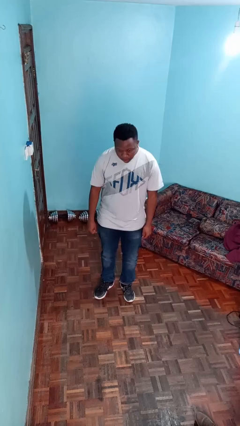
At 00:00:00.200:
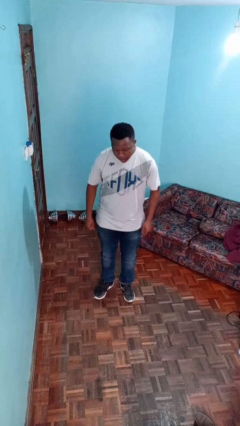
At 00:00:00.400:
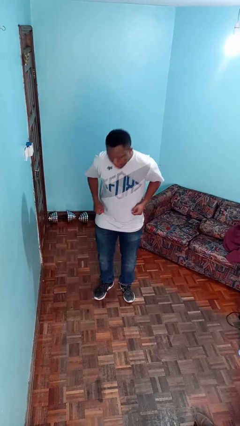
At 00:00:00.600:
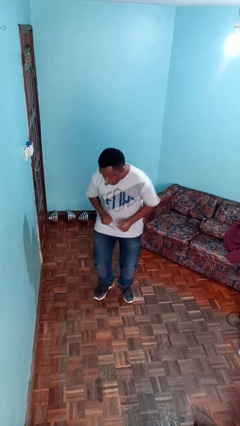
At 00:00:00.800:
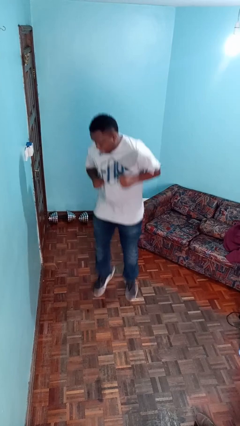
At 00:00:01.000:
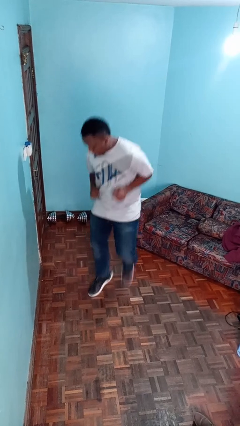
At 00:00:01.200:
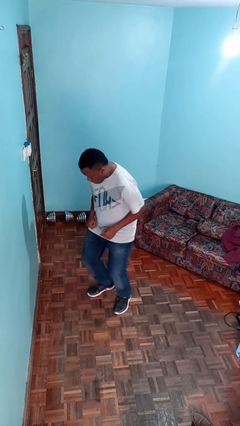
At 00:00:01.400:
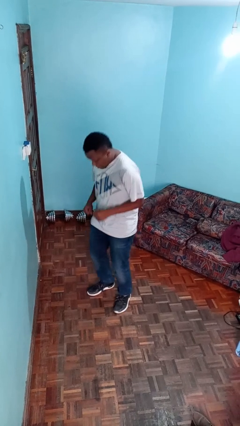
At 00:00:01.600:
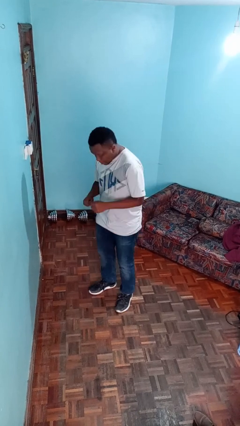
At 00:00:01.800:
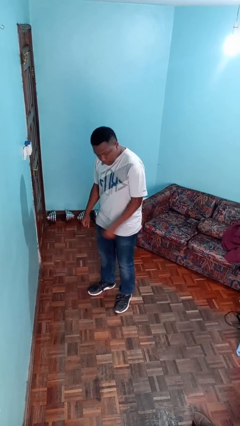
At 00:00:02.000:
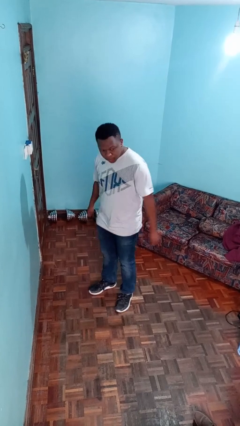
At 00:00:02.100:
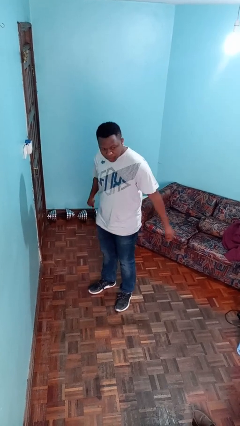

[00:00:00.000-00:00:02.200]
person jumps

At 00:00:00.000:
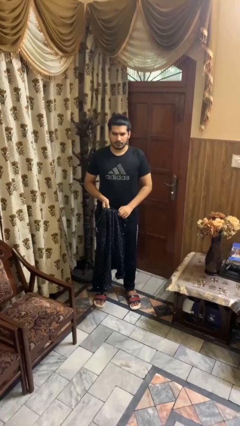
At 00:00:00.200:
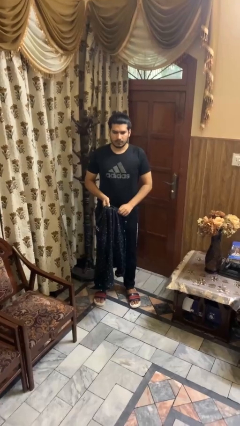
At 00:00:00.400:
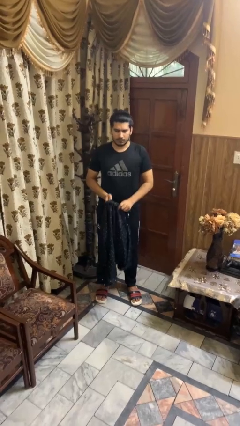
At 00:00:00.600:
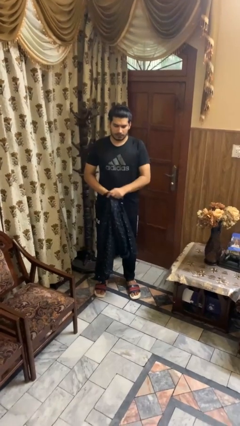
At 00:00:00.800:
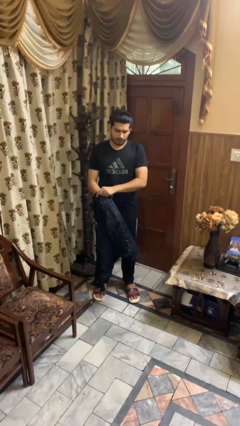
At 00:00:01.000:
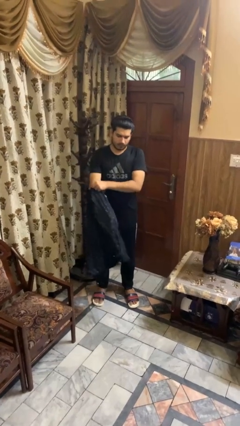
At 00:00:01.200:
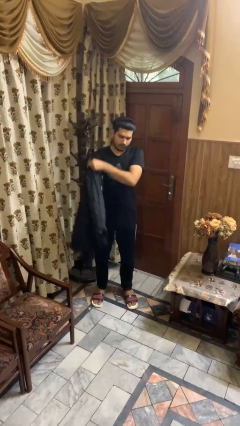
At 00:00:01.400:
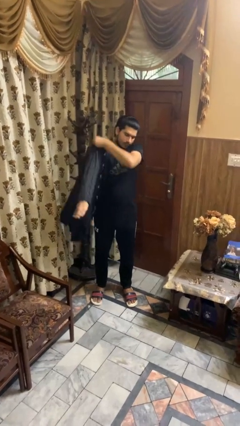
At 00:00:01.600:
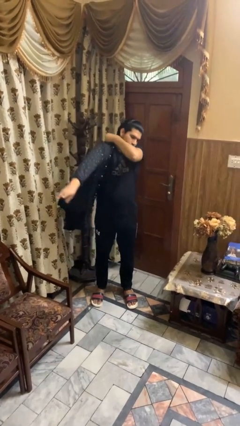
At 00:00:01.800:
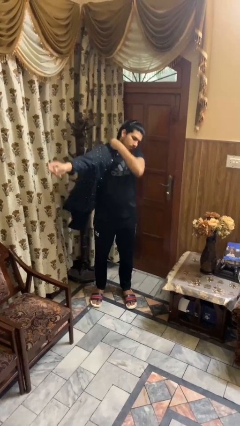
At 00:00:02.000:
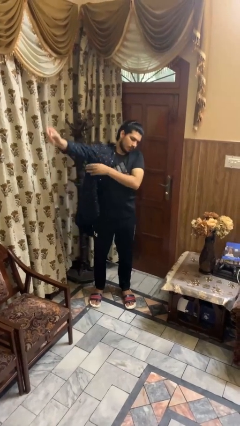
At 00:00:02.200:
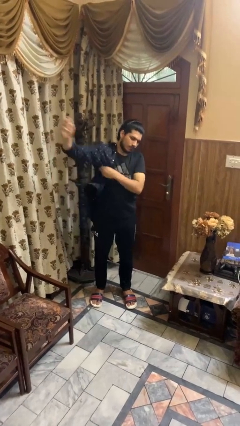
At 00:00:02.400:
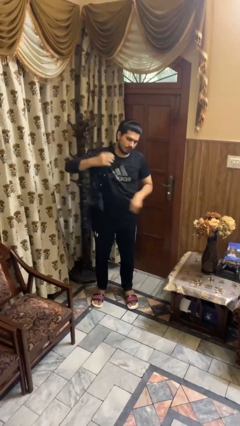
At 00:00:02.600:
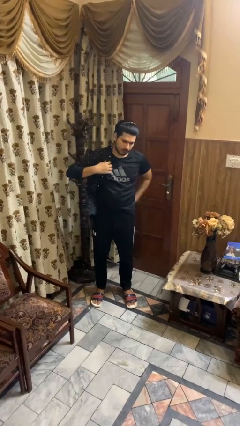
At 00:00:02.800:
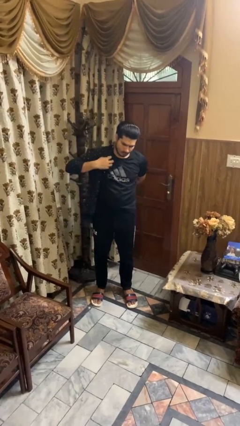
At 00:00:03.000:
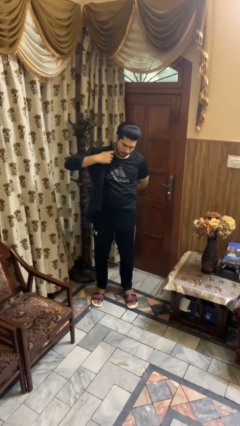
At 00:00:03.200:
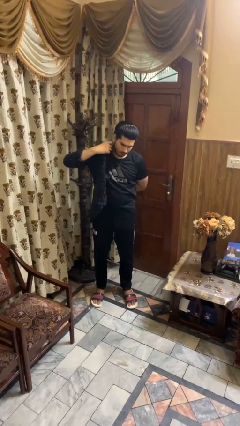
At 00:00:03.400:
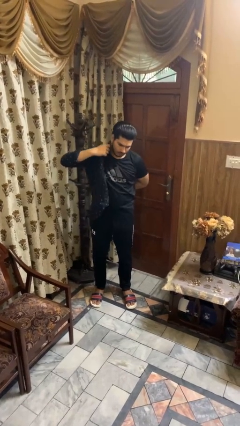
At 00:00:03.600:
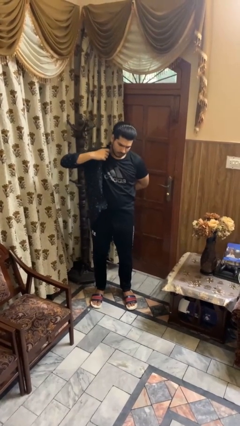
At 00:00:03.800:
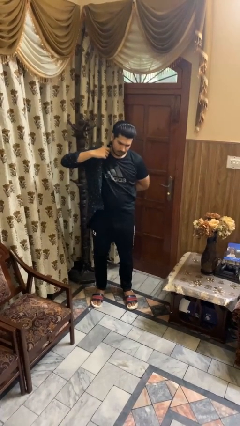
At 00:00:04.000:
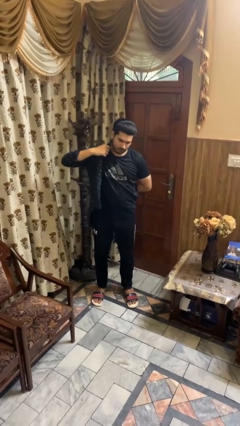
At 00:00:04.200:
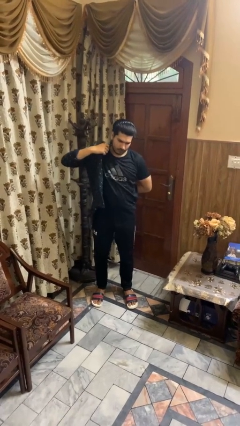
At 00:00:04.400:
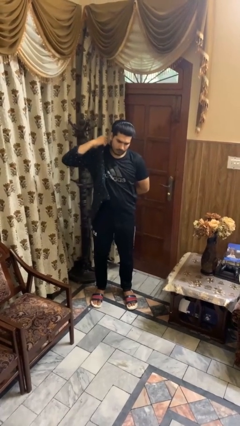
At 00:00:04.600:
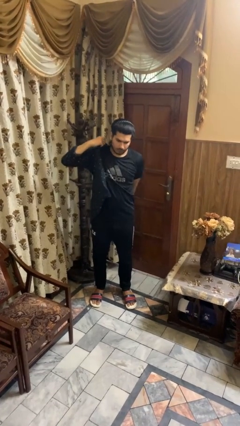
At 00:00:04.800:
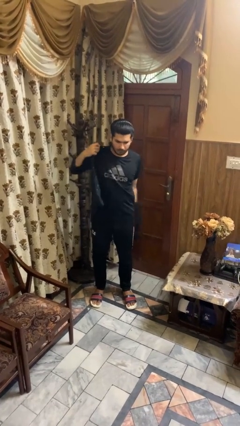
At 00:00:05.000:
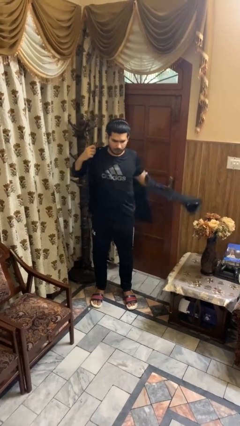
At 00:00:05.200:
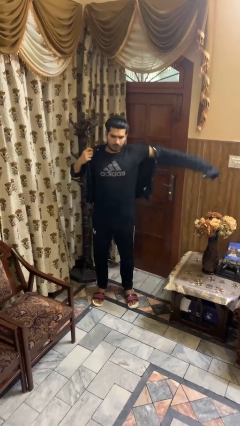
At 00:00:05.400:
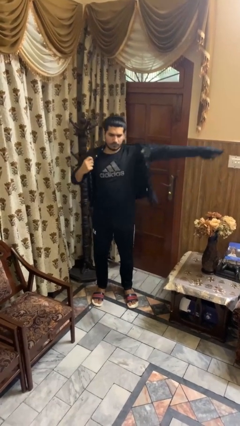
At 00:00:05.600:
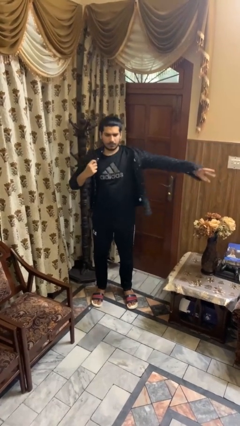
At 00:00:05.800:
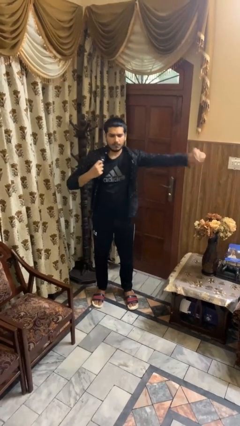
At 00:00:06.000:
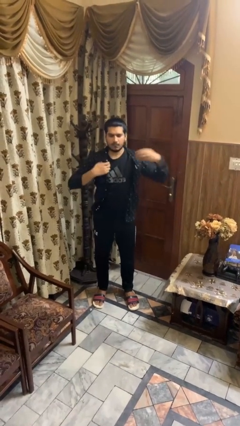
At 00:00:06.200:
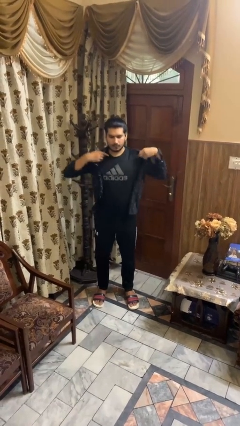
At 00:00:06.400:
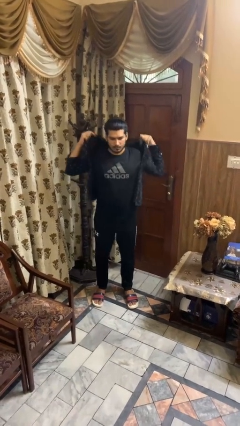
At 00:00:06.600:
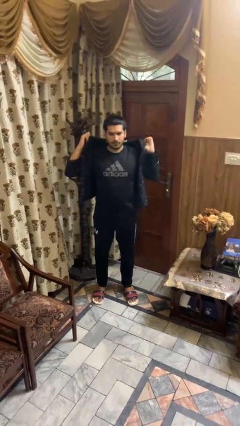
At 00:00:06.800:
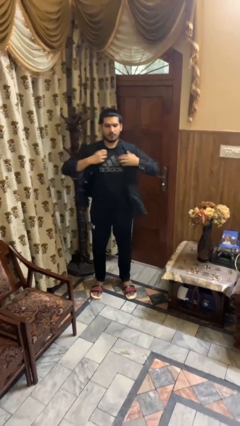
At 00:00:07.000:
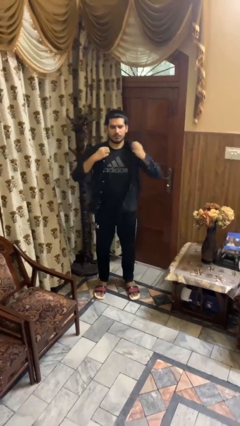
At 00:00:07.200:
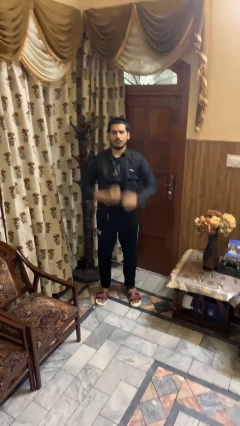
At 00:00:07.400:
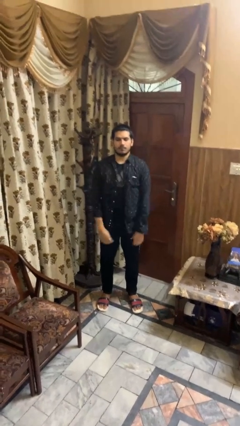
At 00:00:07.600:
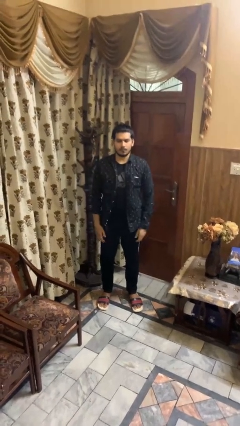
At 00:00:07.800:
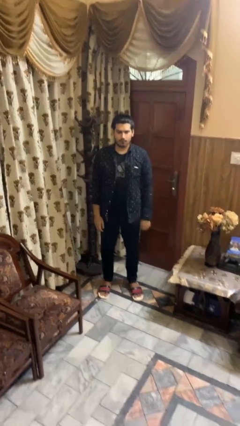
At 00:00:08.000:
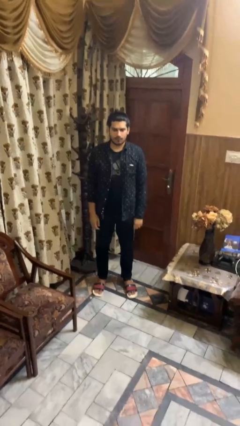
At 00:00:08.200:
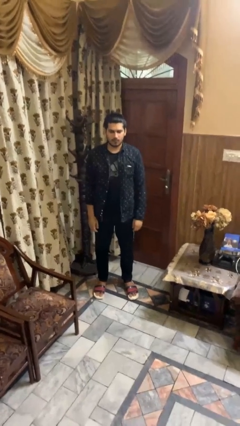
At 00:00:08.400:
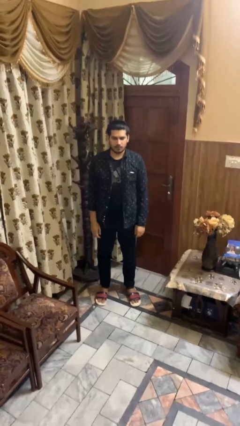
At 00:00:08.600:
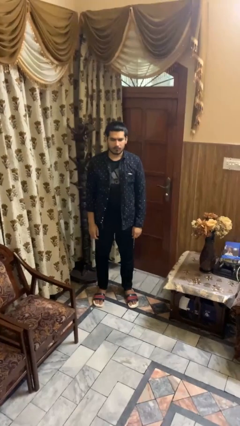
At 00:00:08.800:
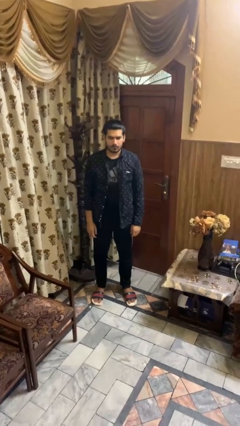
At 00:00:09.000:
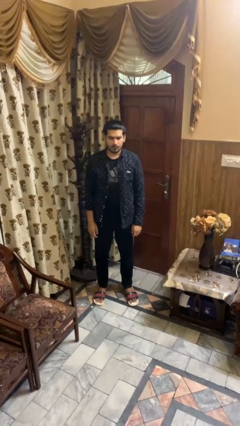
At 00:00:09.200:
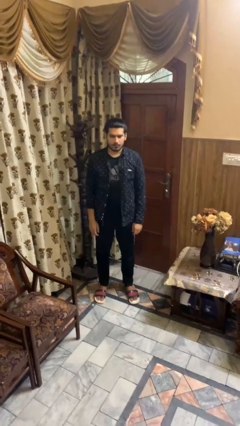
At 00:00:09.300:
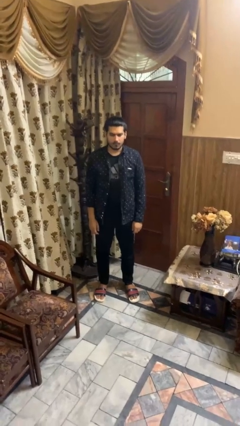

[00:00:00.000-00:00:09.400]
person puts on shirt

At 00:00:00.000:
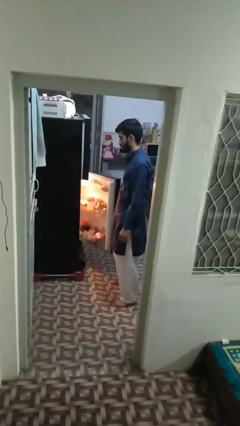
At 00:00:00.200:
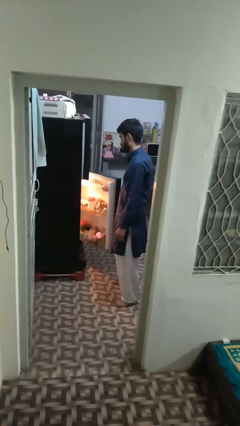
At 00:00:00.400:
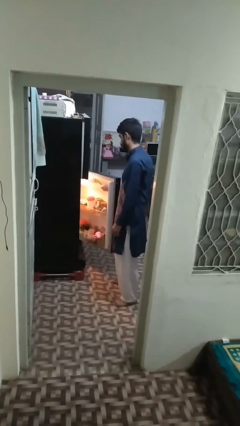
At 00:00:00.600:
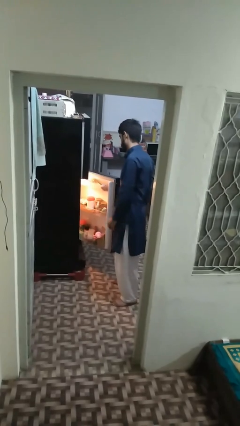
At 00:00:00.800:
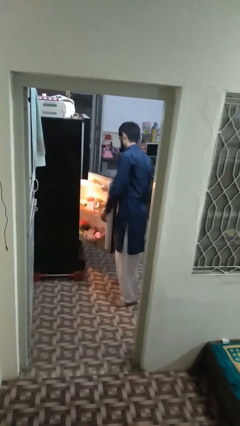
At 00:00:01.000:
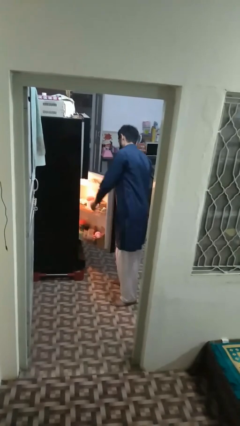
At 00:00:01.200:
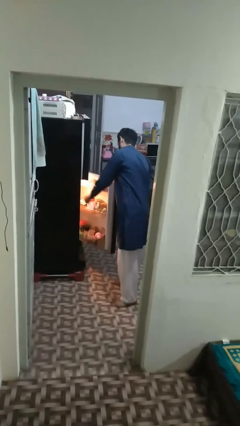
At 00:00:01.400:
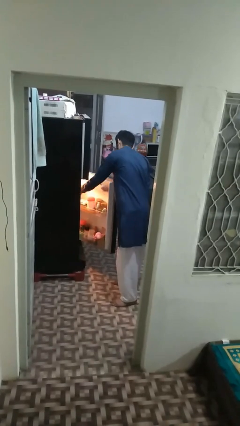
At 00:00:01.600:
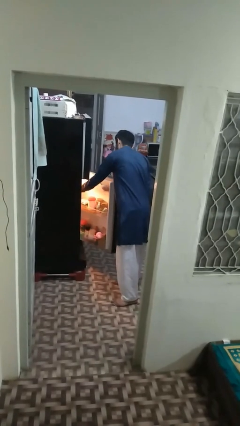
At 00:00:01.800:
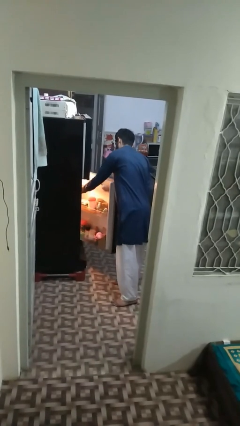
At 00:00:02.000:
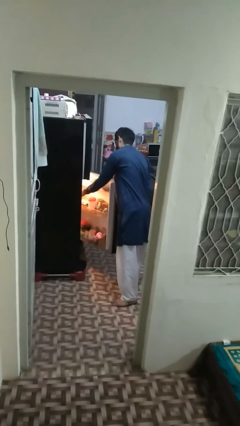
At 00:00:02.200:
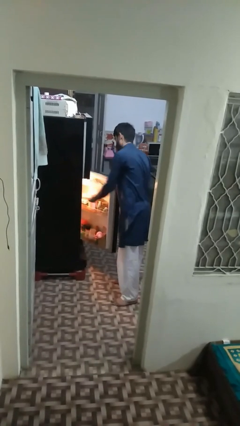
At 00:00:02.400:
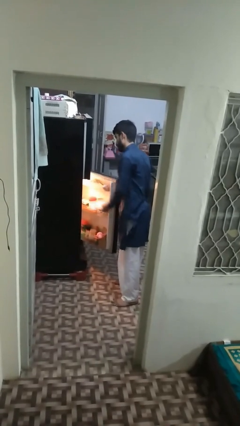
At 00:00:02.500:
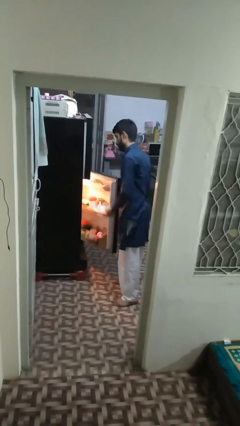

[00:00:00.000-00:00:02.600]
person takes object from refrigerator

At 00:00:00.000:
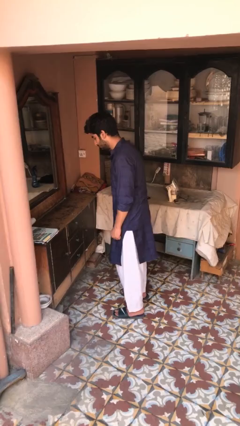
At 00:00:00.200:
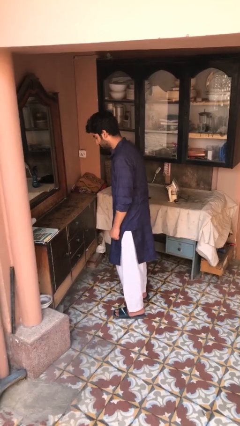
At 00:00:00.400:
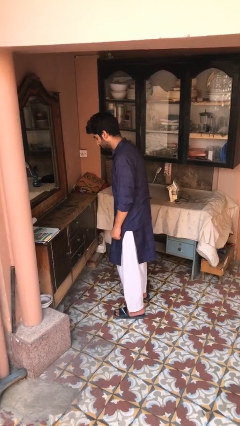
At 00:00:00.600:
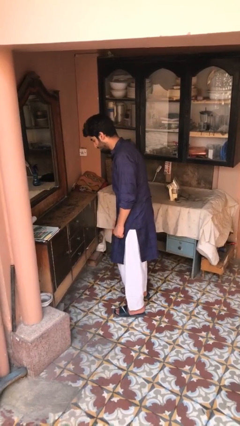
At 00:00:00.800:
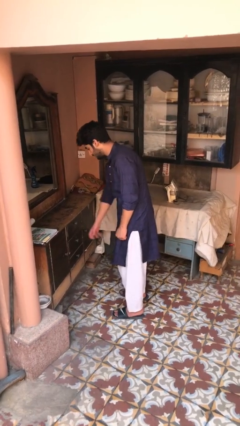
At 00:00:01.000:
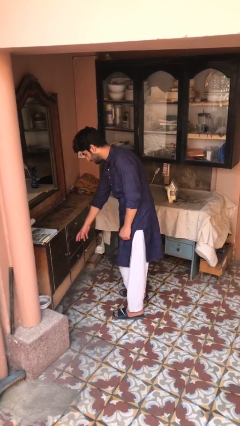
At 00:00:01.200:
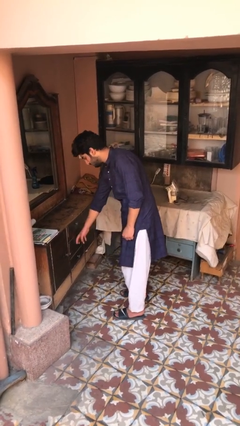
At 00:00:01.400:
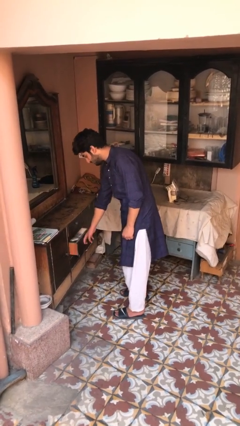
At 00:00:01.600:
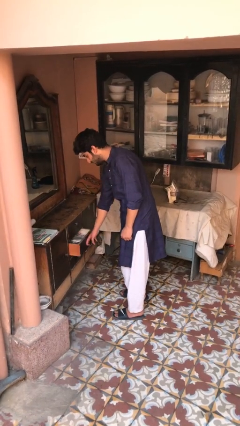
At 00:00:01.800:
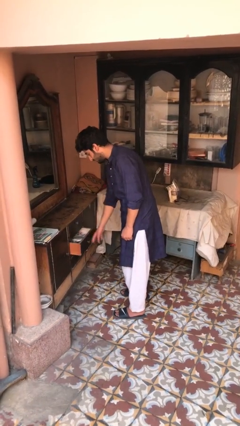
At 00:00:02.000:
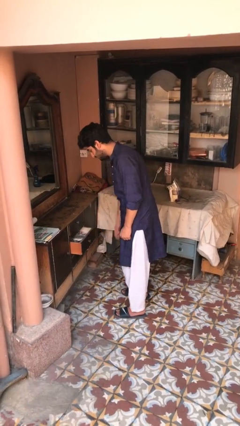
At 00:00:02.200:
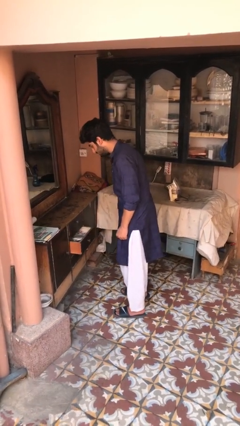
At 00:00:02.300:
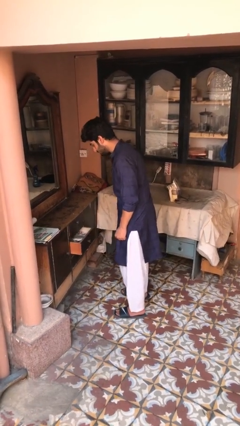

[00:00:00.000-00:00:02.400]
person opens dresser drawer

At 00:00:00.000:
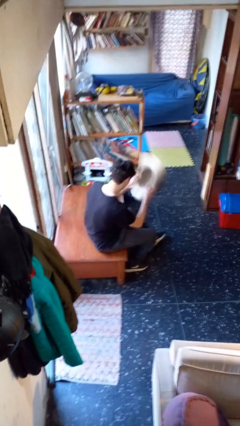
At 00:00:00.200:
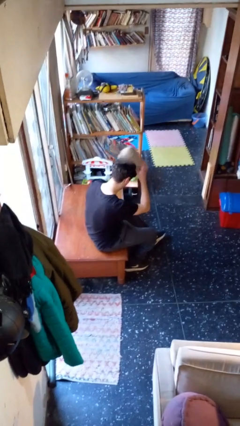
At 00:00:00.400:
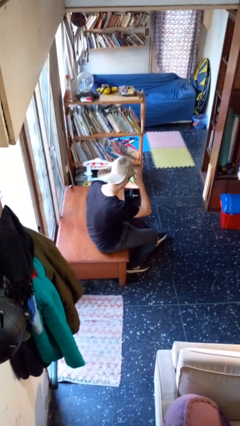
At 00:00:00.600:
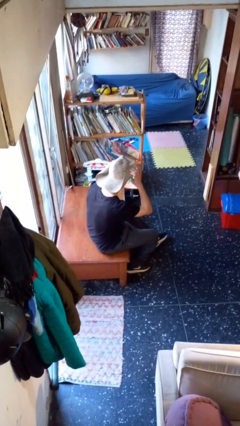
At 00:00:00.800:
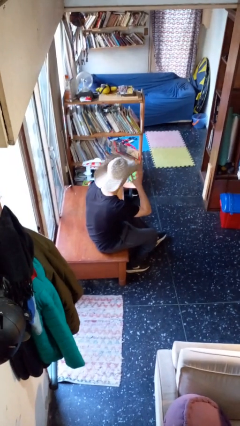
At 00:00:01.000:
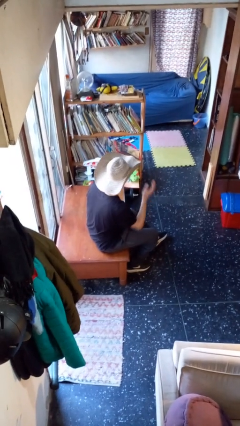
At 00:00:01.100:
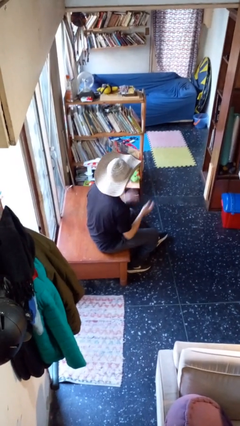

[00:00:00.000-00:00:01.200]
person puts on hat
